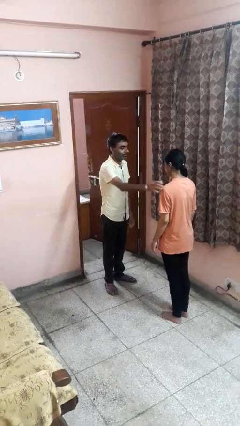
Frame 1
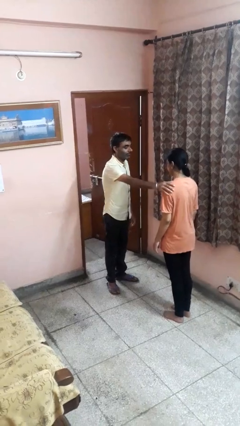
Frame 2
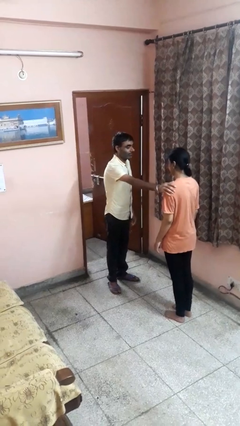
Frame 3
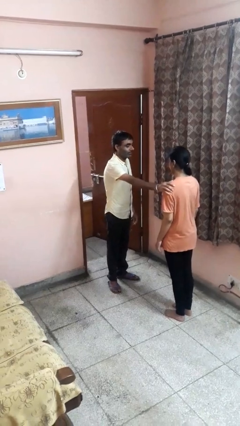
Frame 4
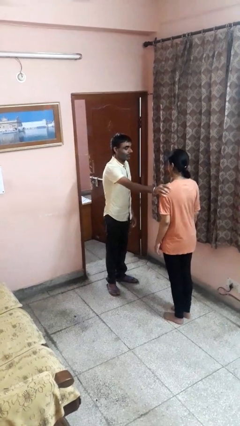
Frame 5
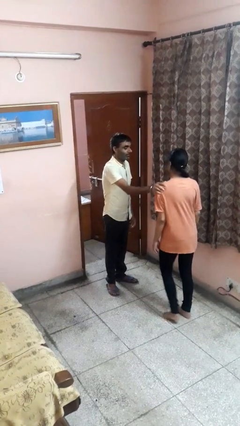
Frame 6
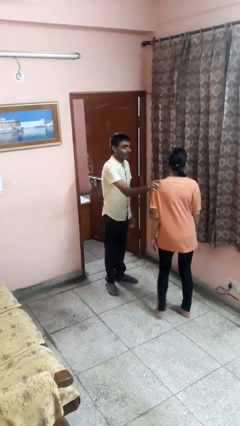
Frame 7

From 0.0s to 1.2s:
person grabs person by shoulder

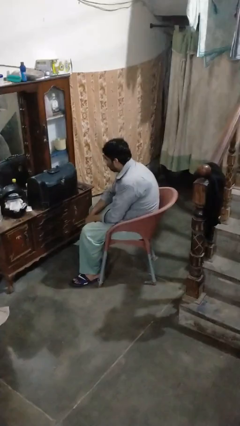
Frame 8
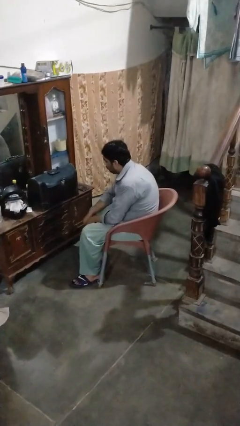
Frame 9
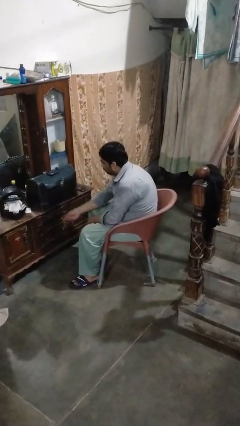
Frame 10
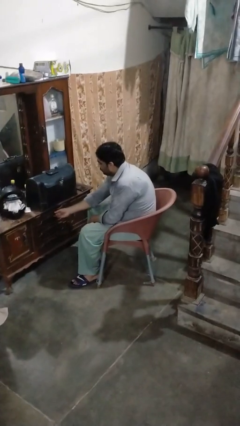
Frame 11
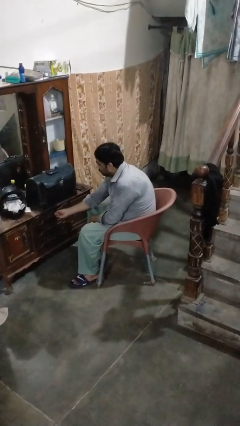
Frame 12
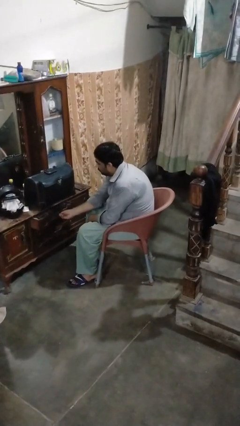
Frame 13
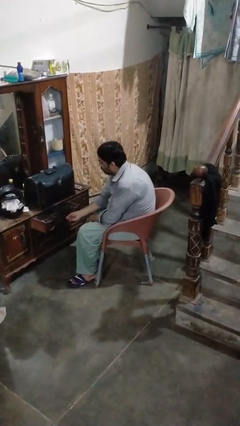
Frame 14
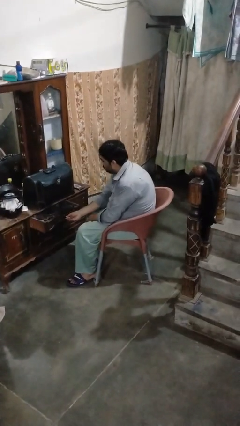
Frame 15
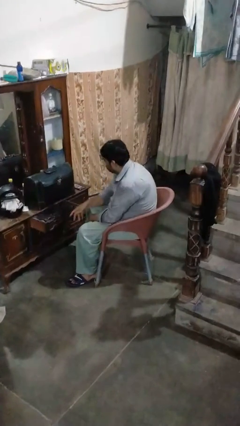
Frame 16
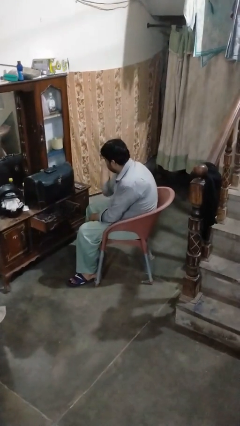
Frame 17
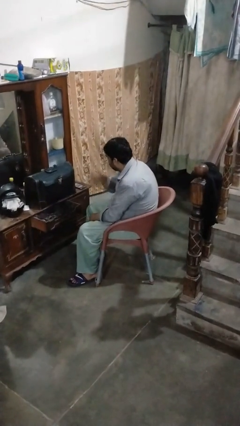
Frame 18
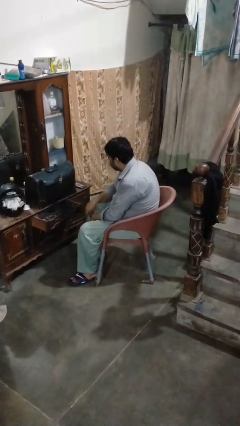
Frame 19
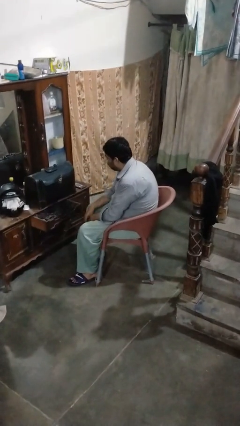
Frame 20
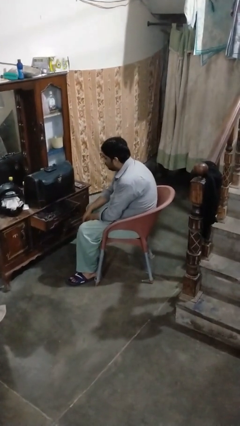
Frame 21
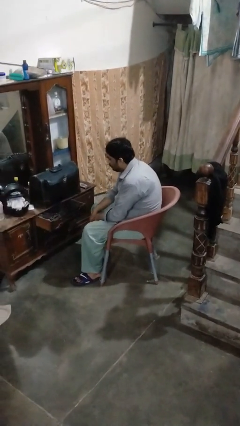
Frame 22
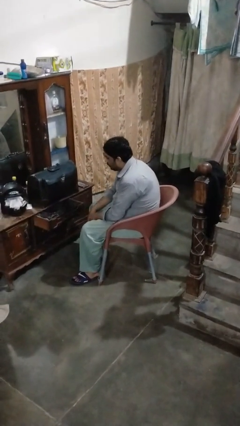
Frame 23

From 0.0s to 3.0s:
person opens dresser drawer

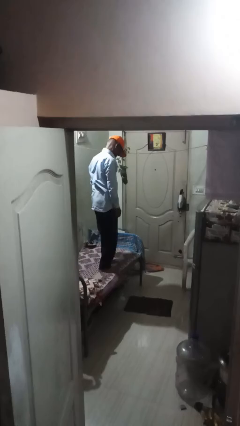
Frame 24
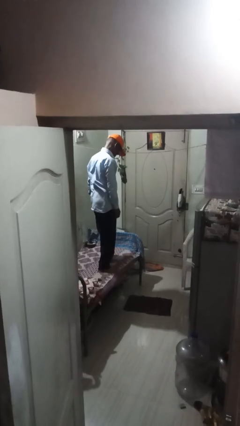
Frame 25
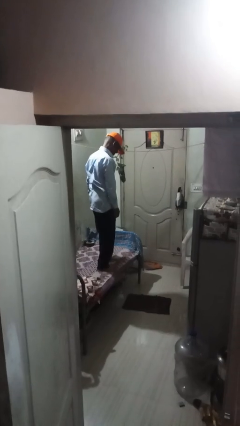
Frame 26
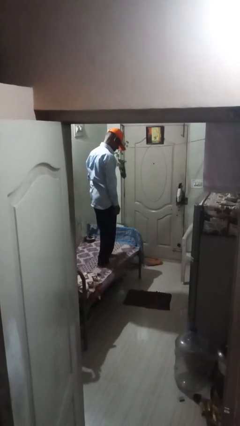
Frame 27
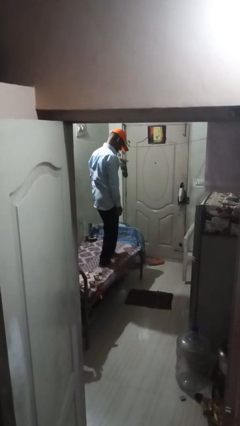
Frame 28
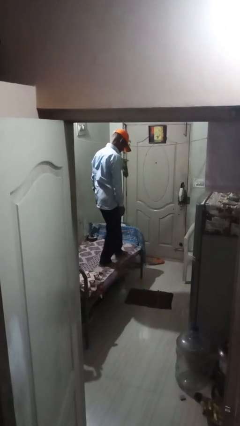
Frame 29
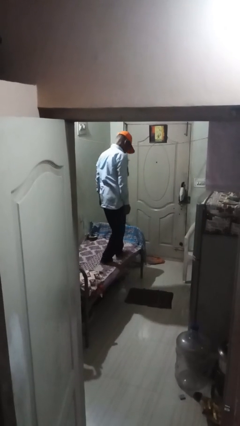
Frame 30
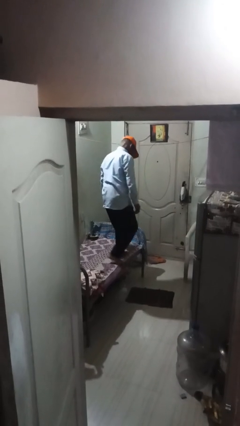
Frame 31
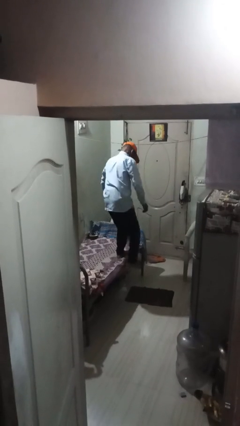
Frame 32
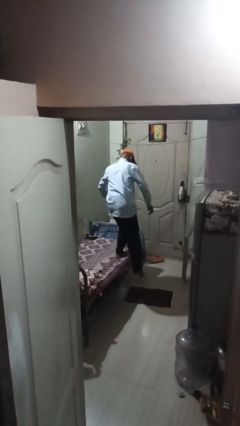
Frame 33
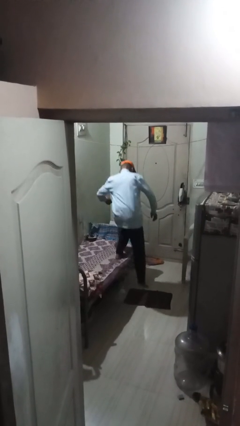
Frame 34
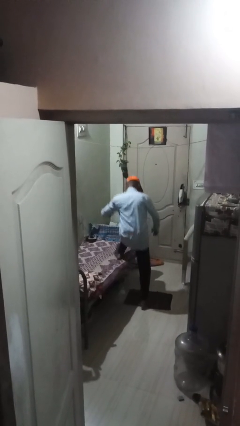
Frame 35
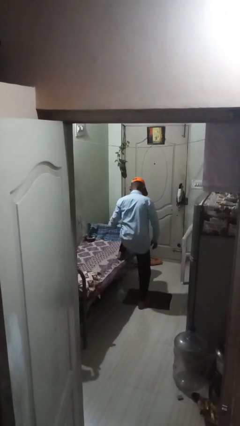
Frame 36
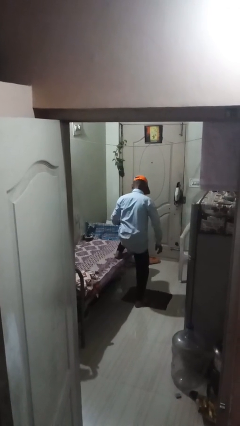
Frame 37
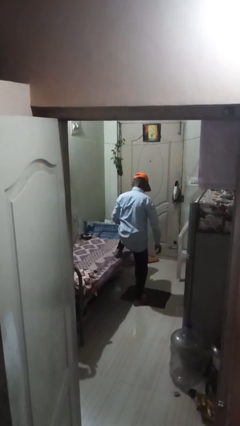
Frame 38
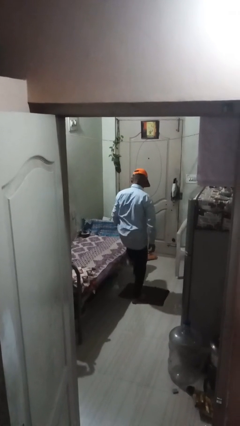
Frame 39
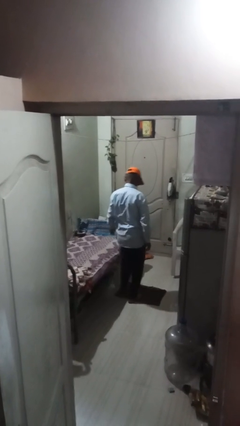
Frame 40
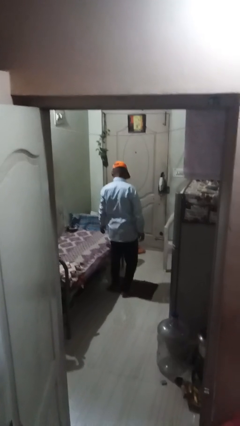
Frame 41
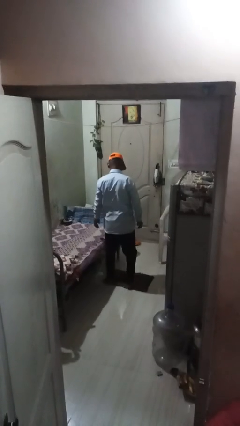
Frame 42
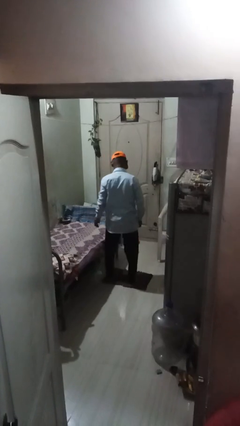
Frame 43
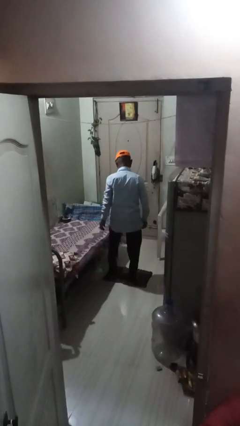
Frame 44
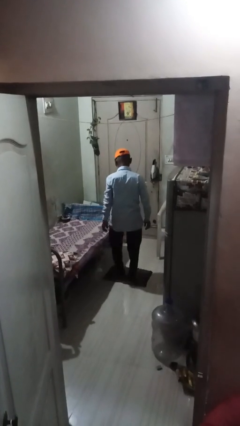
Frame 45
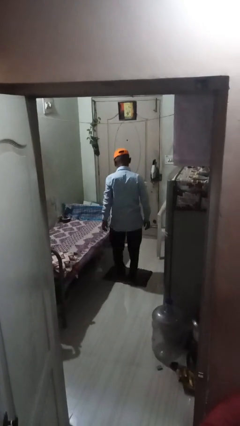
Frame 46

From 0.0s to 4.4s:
person climbs off couch

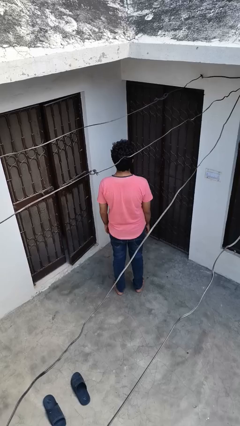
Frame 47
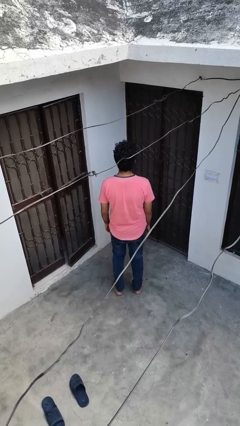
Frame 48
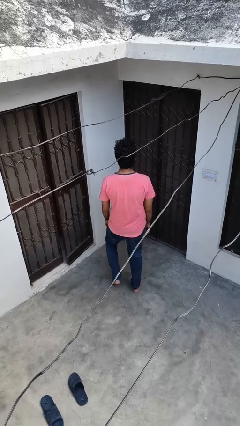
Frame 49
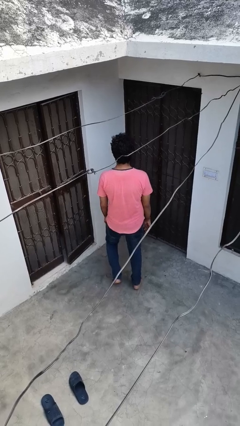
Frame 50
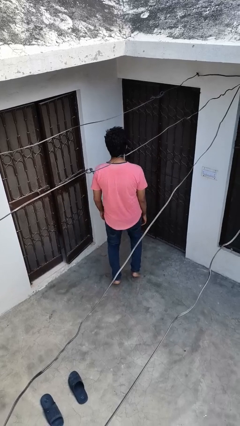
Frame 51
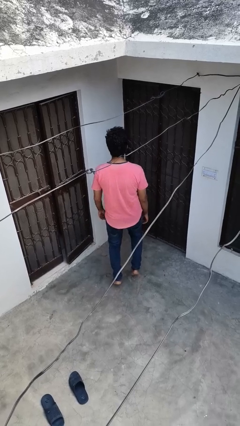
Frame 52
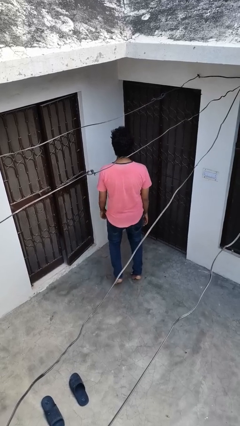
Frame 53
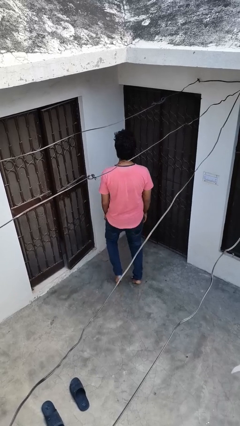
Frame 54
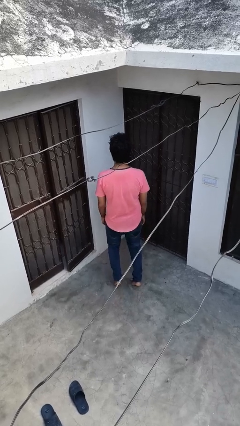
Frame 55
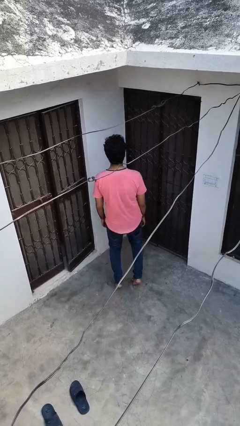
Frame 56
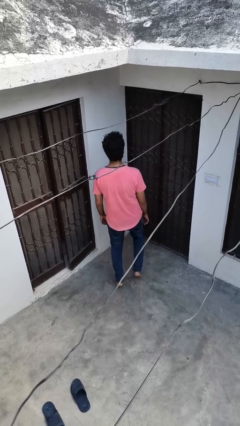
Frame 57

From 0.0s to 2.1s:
person walks tiptoe

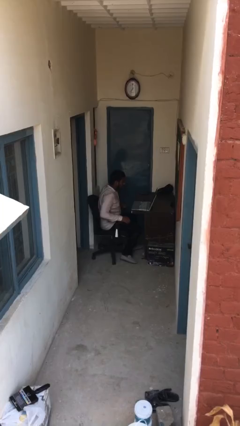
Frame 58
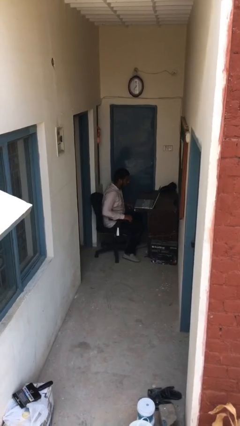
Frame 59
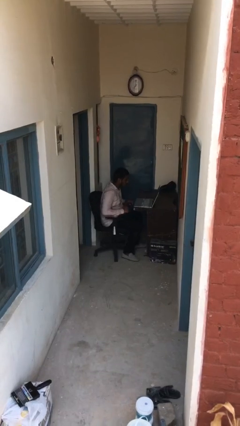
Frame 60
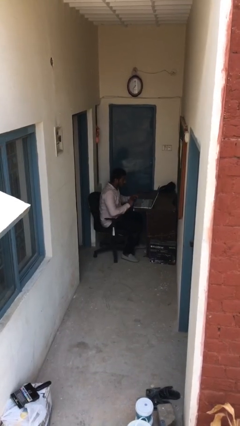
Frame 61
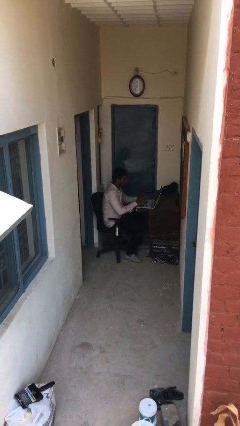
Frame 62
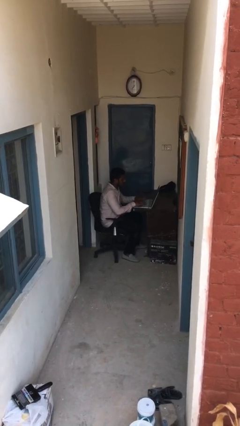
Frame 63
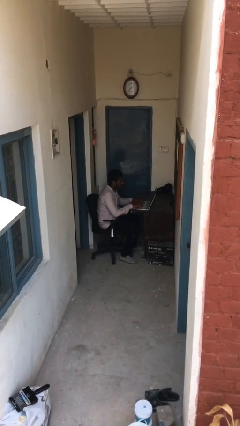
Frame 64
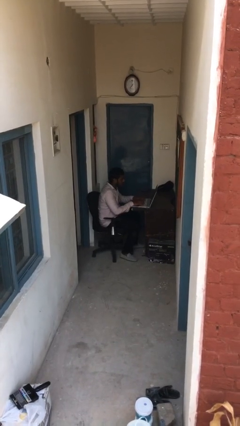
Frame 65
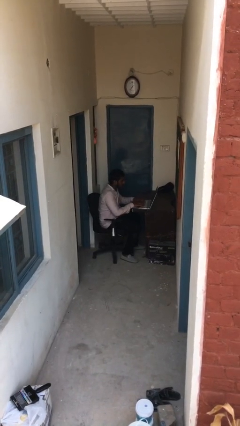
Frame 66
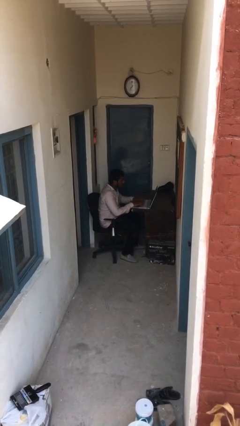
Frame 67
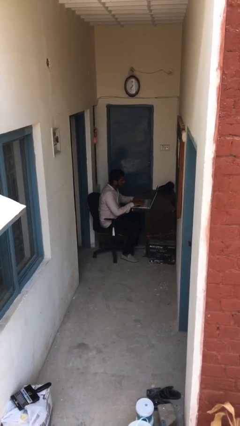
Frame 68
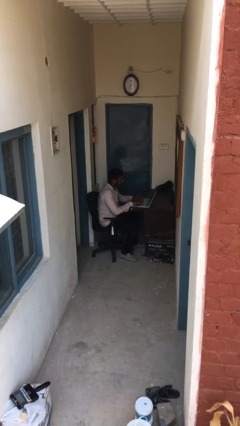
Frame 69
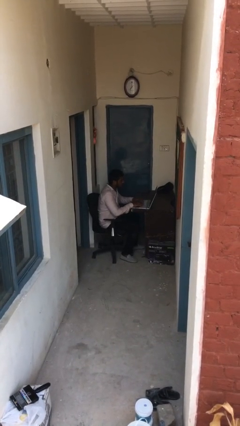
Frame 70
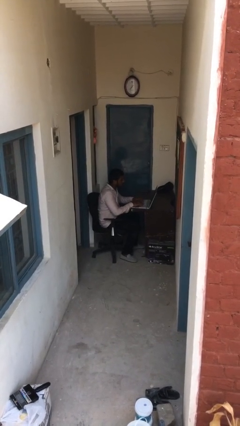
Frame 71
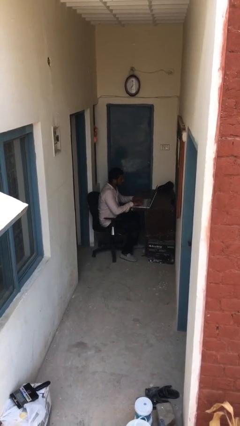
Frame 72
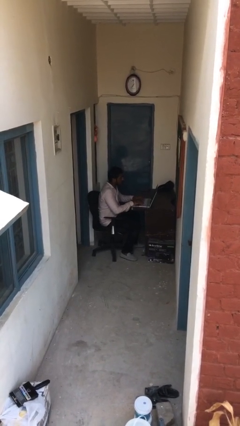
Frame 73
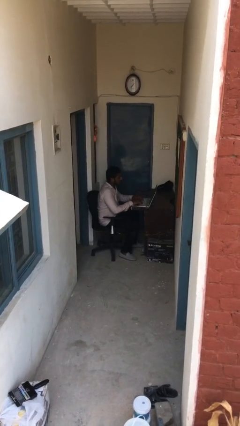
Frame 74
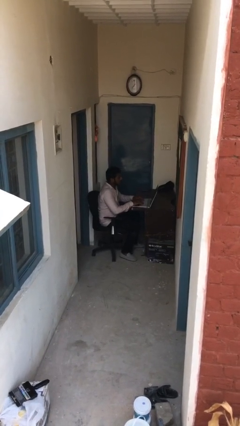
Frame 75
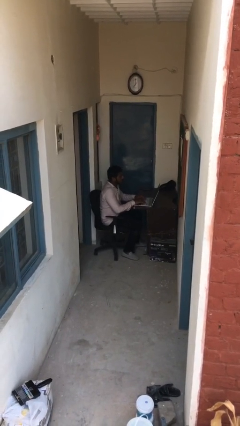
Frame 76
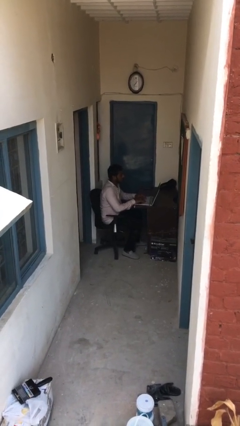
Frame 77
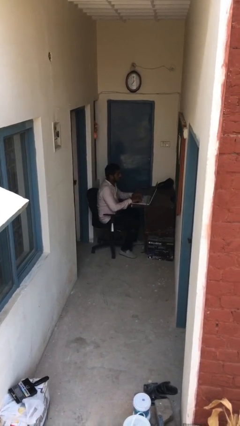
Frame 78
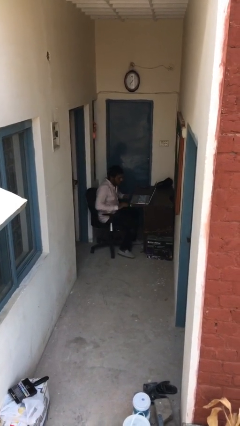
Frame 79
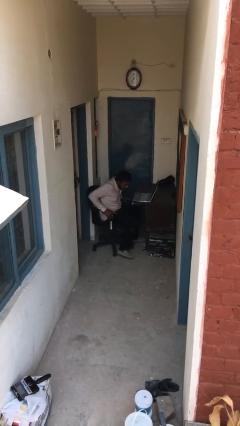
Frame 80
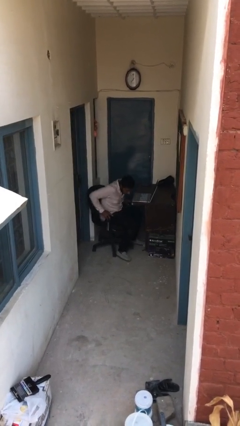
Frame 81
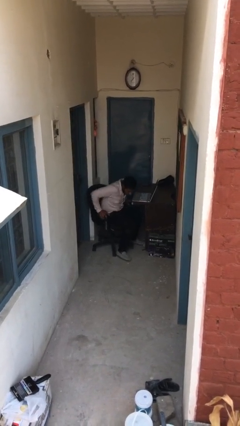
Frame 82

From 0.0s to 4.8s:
person interacts with laptop

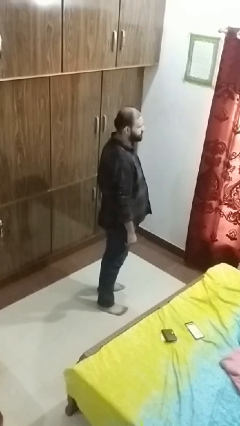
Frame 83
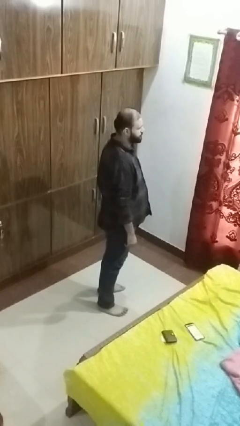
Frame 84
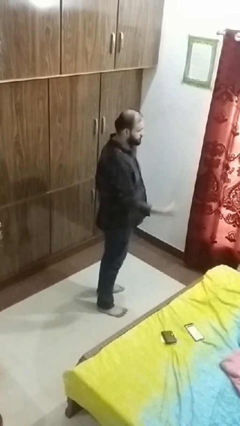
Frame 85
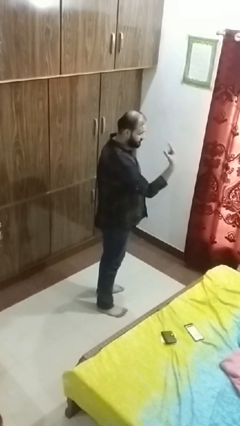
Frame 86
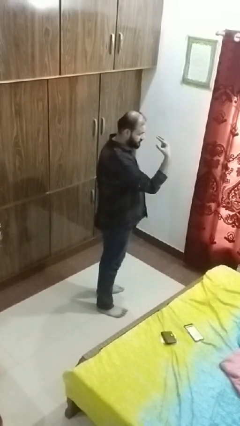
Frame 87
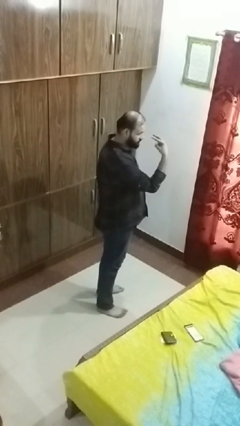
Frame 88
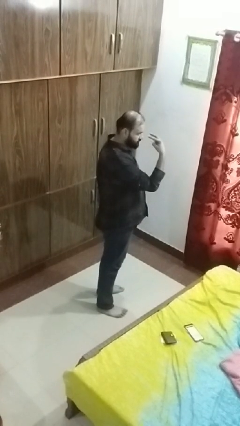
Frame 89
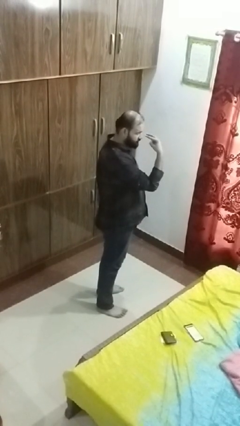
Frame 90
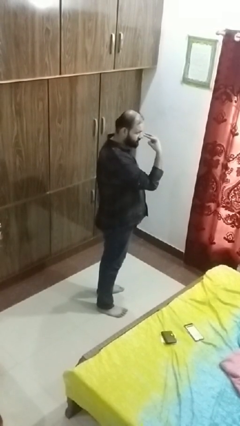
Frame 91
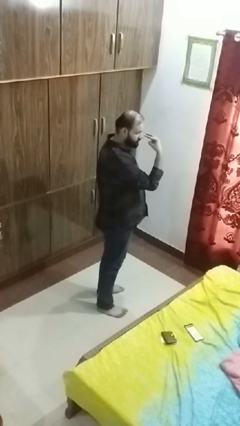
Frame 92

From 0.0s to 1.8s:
person gestures watch closely

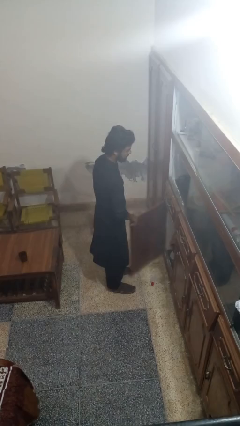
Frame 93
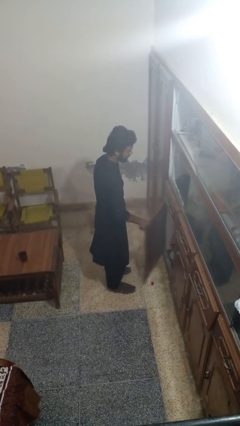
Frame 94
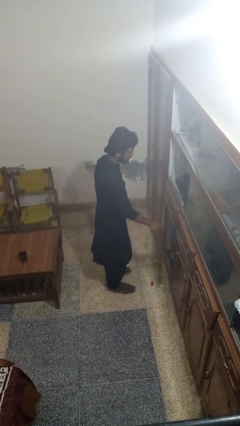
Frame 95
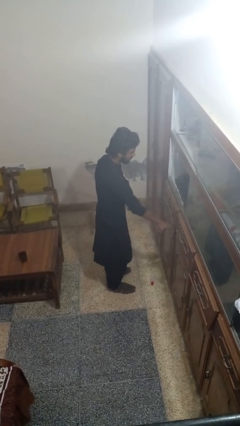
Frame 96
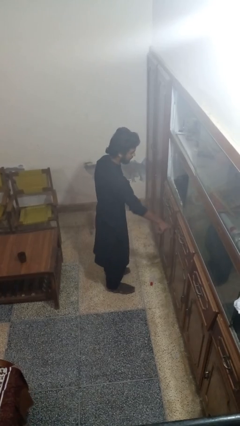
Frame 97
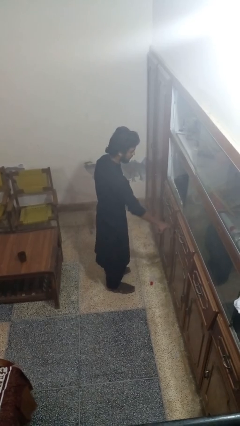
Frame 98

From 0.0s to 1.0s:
person closes cabinet
